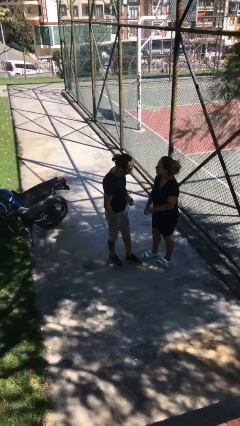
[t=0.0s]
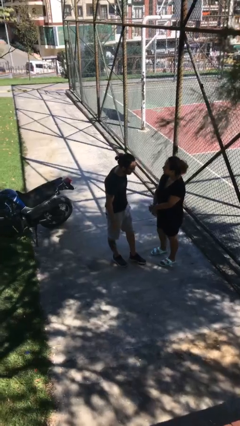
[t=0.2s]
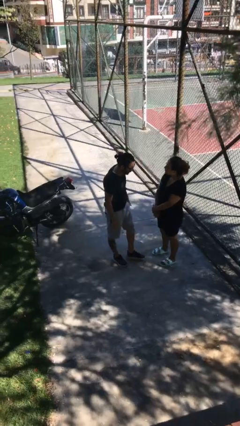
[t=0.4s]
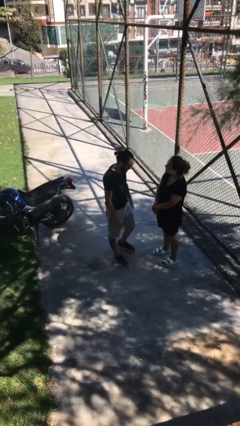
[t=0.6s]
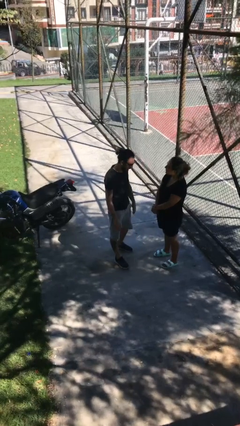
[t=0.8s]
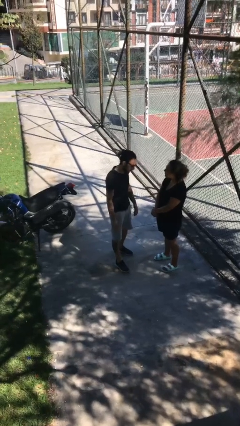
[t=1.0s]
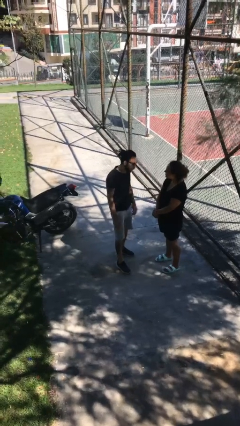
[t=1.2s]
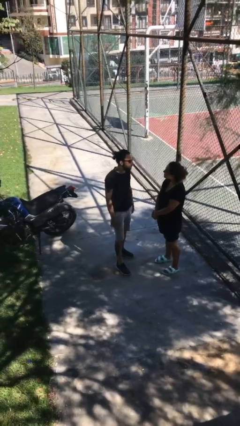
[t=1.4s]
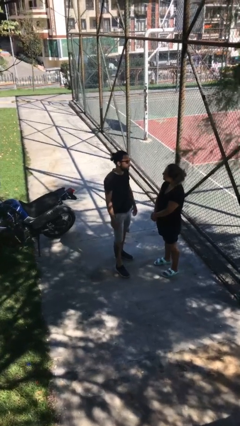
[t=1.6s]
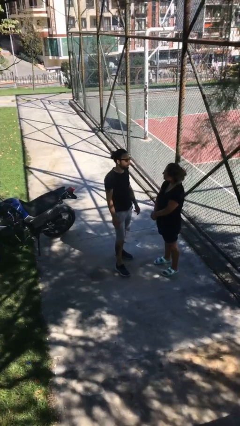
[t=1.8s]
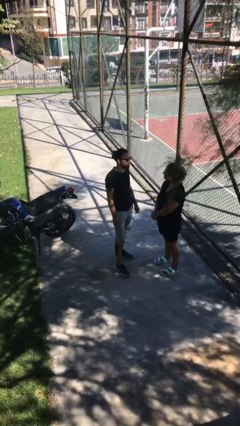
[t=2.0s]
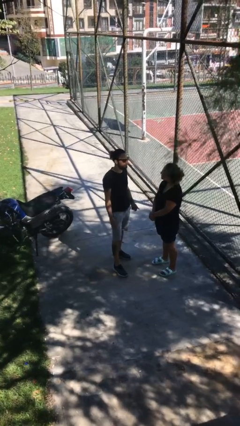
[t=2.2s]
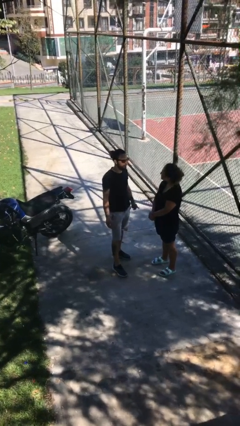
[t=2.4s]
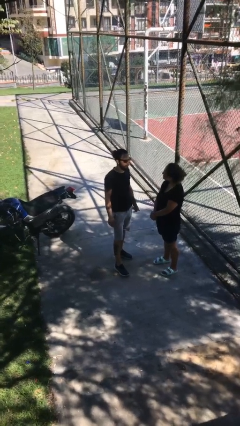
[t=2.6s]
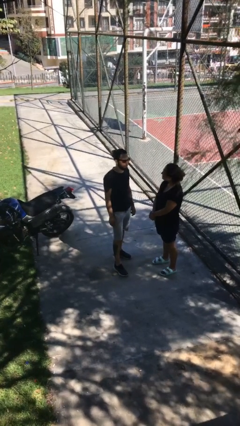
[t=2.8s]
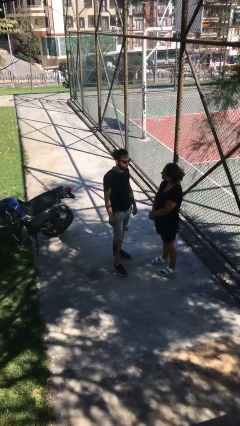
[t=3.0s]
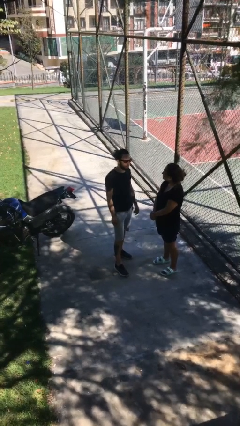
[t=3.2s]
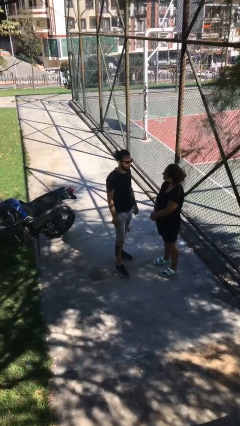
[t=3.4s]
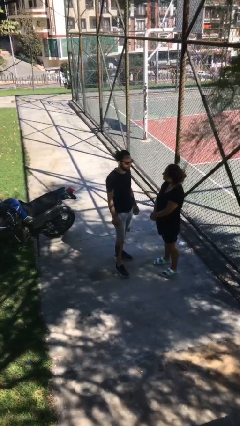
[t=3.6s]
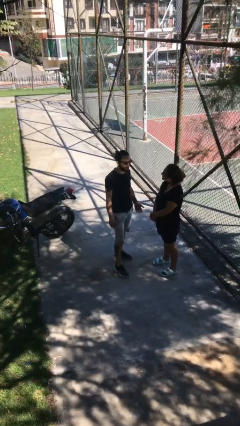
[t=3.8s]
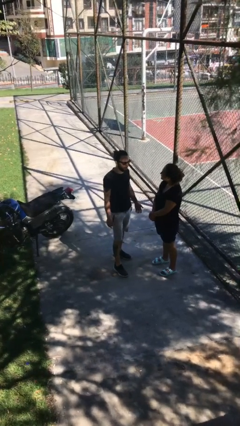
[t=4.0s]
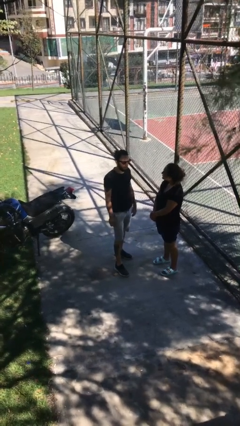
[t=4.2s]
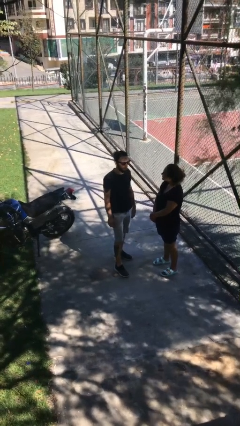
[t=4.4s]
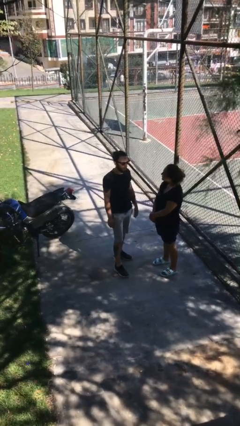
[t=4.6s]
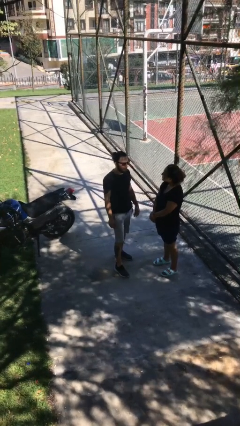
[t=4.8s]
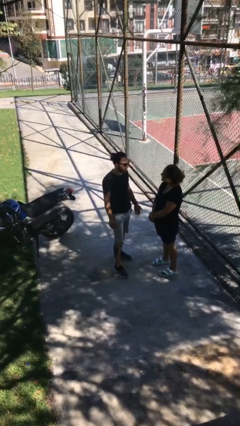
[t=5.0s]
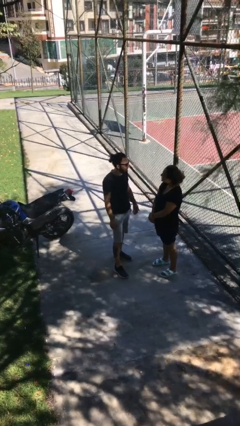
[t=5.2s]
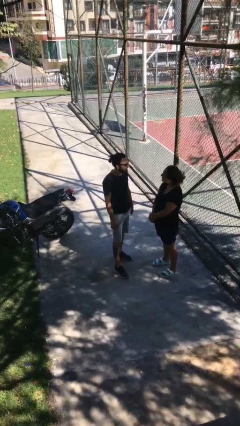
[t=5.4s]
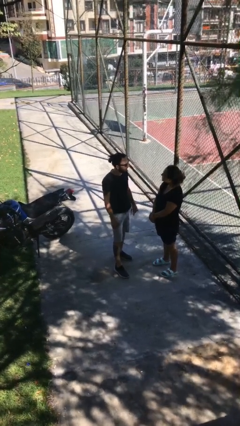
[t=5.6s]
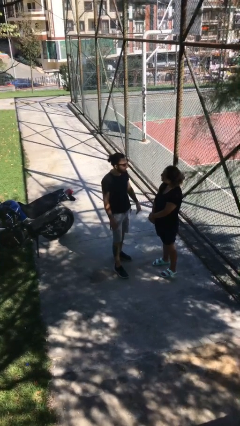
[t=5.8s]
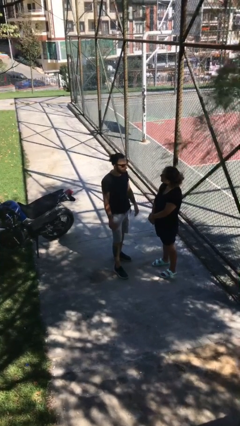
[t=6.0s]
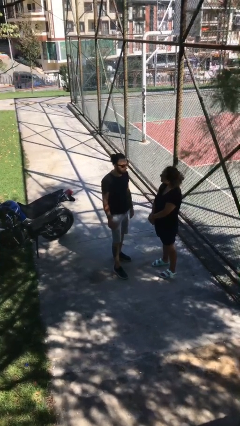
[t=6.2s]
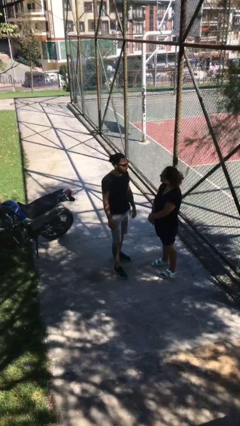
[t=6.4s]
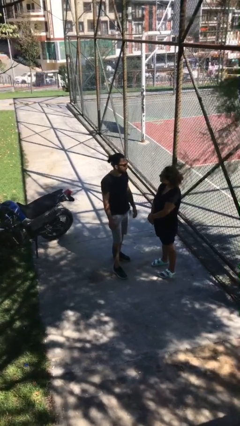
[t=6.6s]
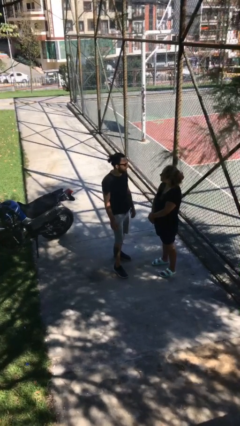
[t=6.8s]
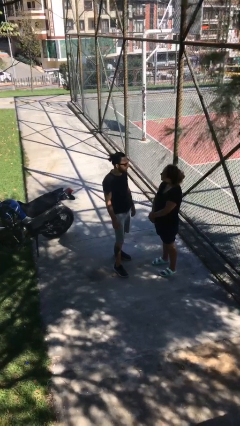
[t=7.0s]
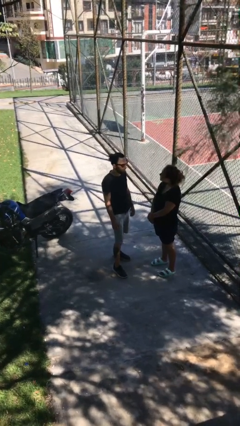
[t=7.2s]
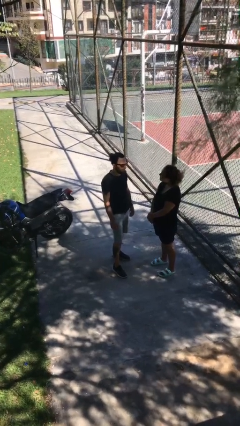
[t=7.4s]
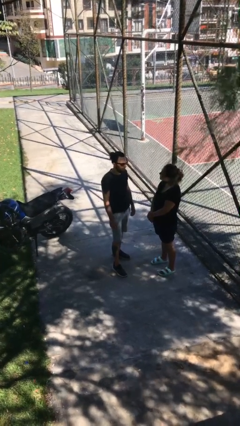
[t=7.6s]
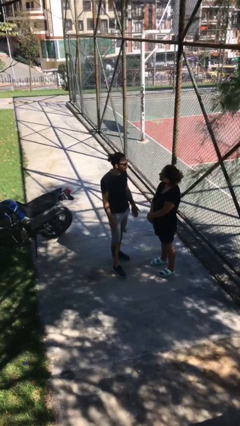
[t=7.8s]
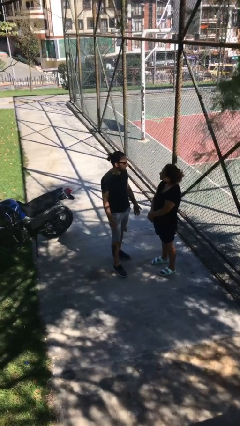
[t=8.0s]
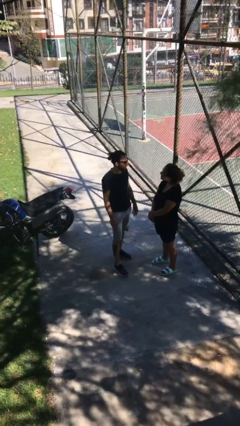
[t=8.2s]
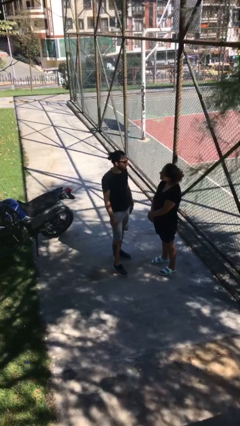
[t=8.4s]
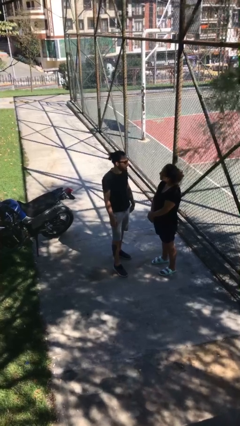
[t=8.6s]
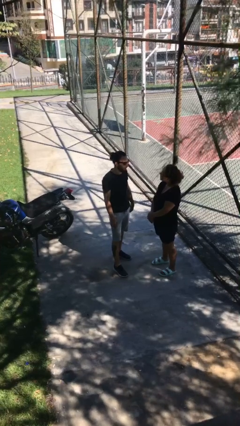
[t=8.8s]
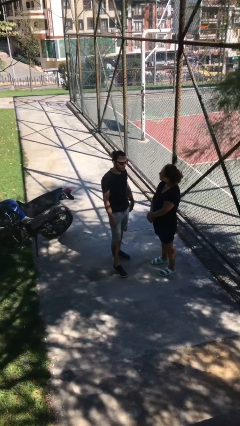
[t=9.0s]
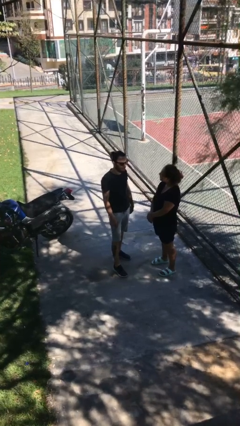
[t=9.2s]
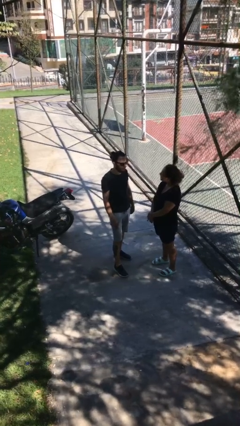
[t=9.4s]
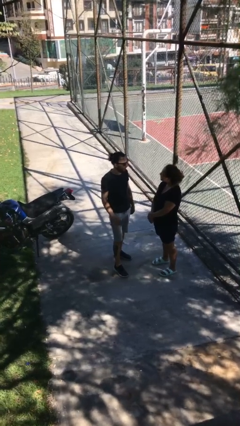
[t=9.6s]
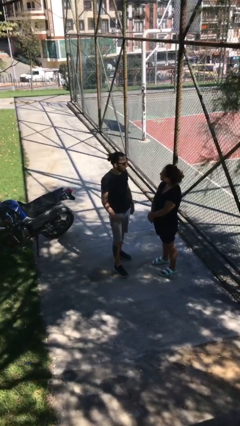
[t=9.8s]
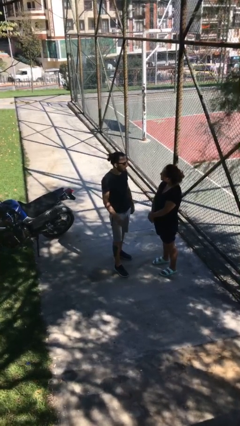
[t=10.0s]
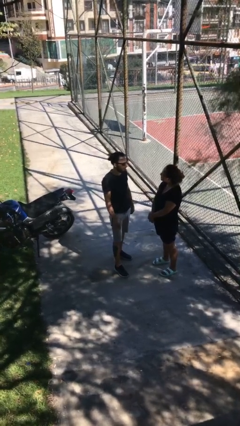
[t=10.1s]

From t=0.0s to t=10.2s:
person talks to person

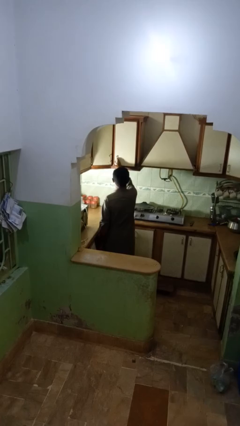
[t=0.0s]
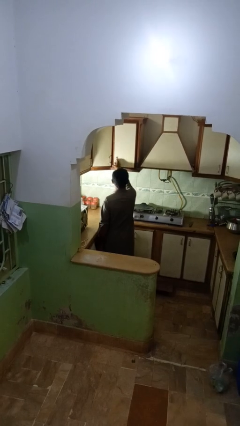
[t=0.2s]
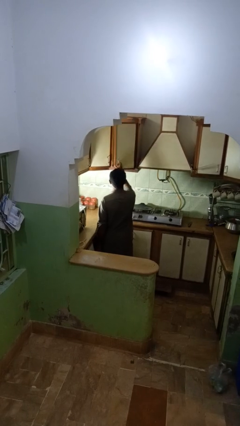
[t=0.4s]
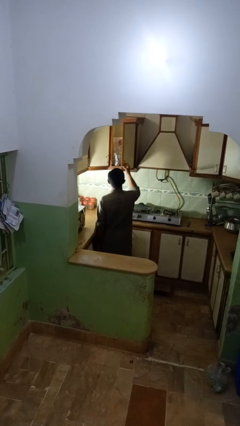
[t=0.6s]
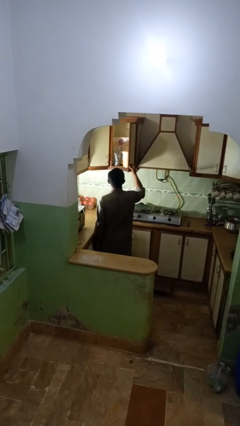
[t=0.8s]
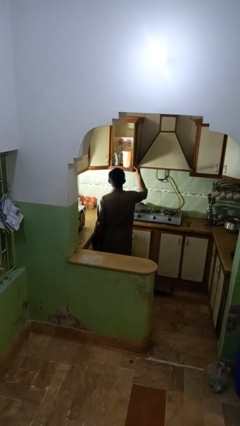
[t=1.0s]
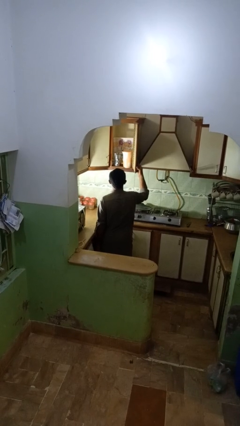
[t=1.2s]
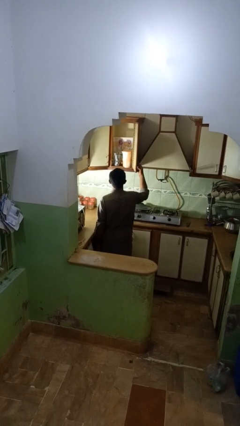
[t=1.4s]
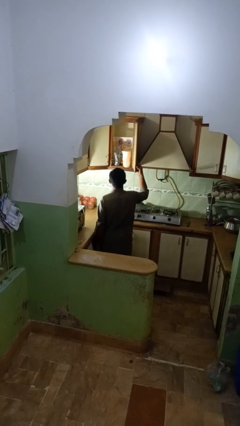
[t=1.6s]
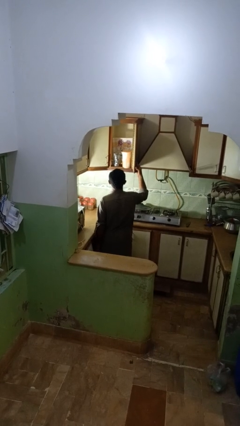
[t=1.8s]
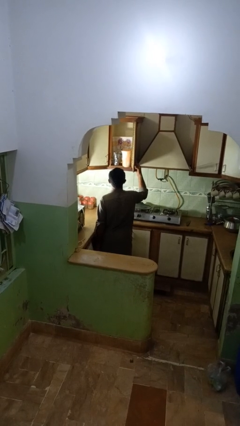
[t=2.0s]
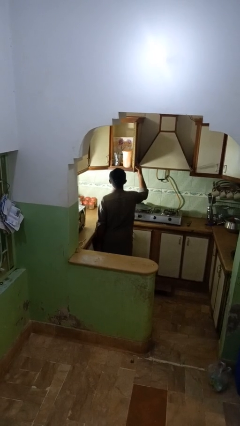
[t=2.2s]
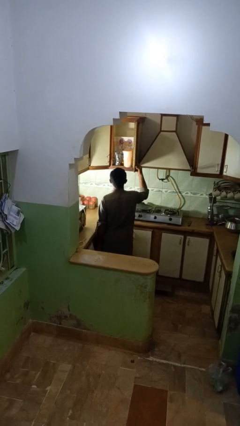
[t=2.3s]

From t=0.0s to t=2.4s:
person opens kitchen drawer

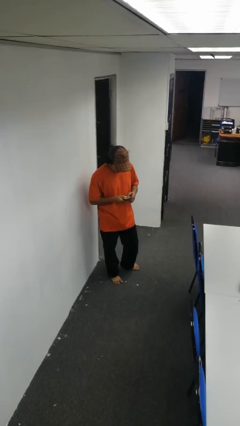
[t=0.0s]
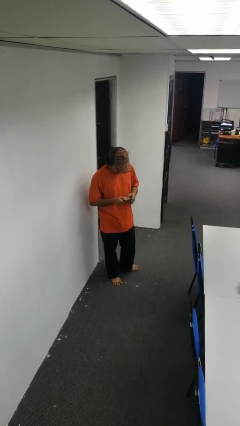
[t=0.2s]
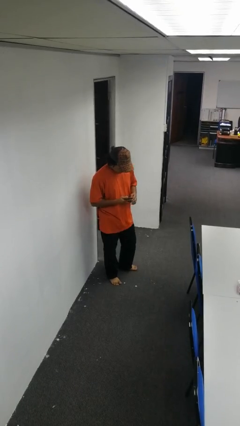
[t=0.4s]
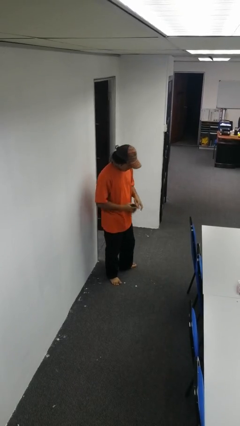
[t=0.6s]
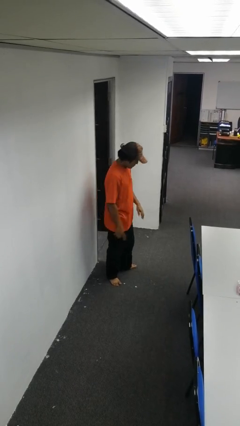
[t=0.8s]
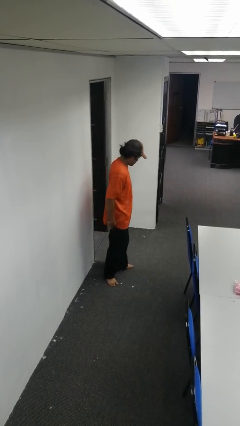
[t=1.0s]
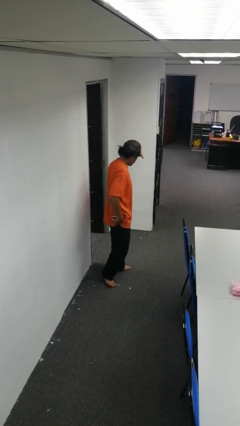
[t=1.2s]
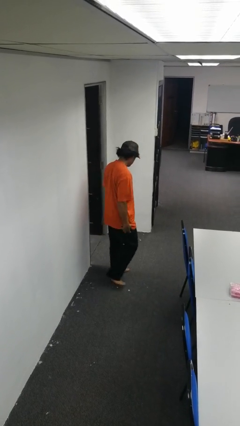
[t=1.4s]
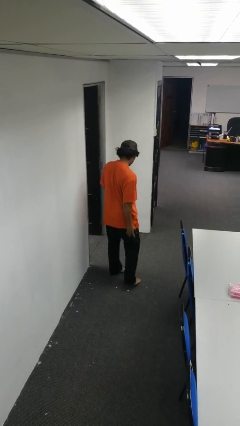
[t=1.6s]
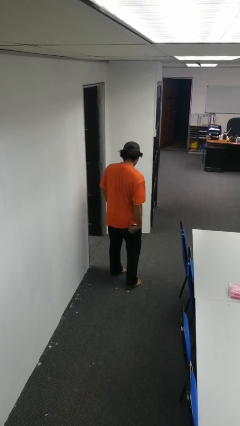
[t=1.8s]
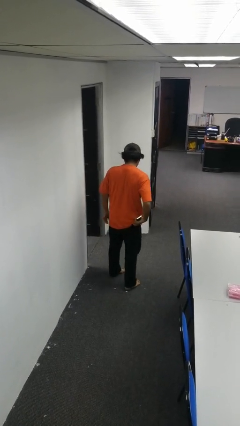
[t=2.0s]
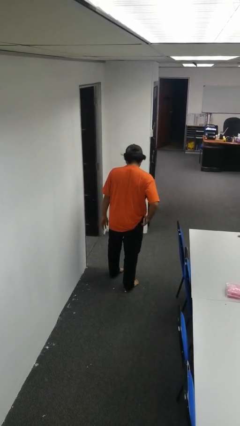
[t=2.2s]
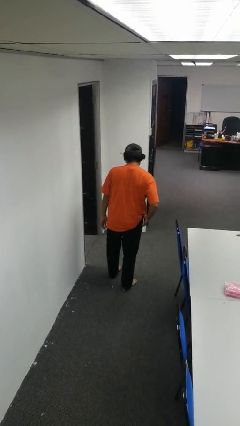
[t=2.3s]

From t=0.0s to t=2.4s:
person puts phone into pocket

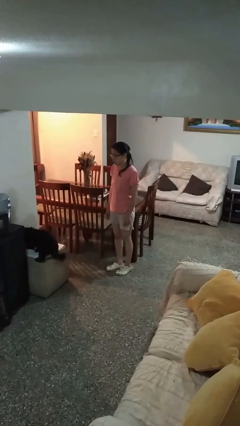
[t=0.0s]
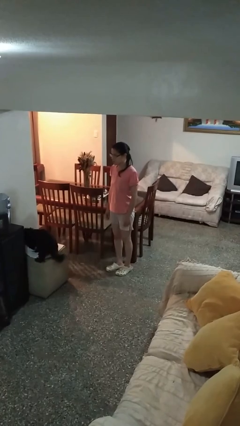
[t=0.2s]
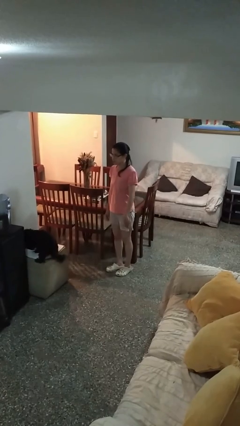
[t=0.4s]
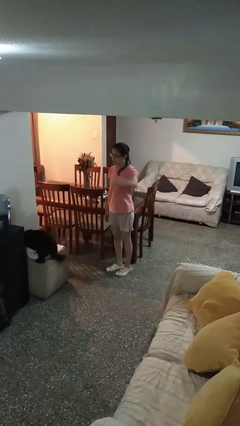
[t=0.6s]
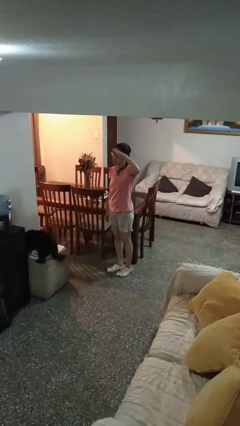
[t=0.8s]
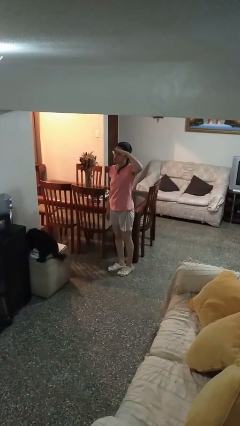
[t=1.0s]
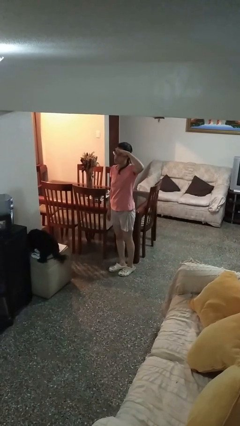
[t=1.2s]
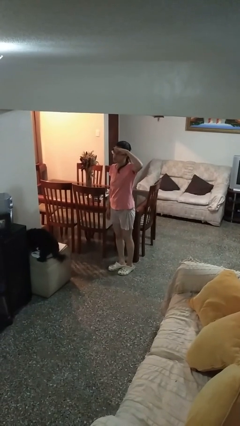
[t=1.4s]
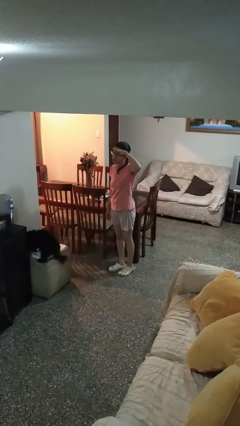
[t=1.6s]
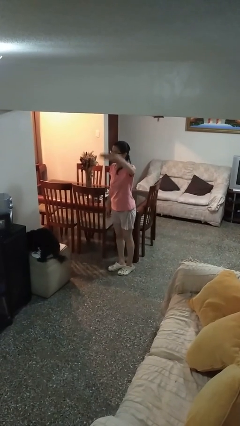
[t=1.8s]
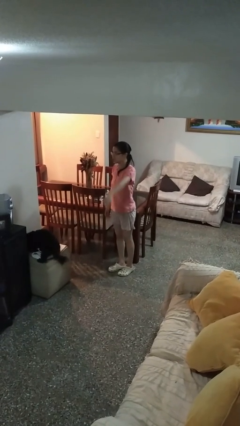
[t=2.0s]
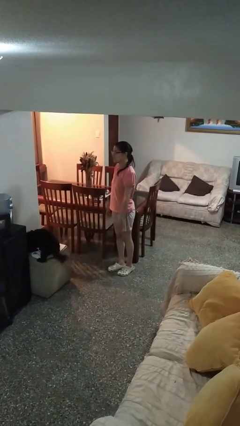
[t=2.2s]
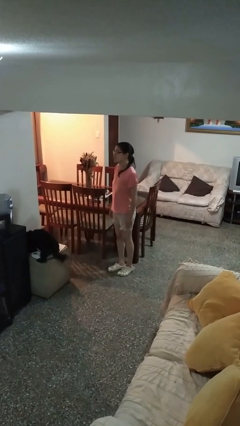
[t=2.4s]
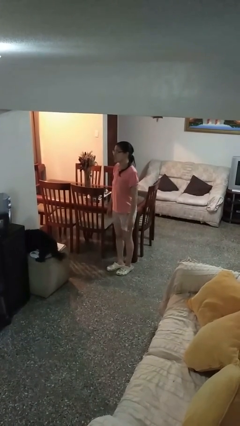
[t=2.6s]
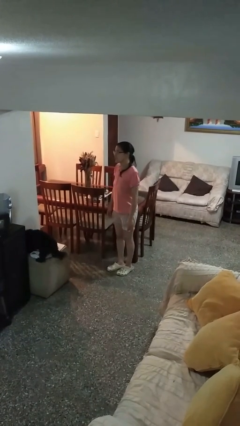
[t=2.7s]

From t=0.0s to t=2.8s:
person salutes
